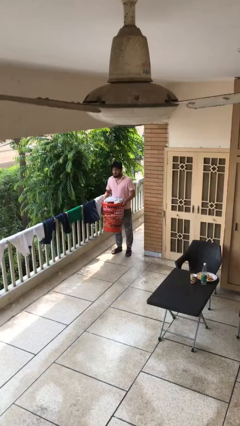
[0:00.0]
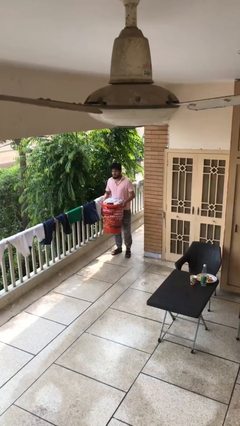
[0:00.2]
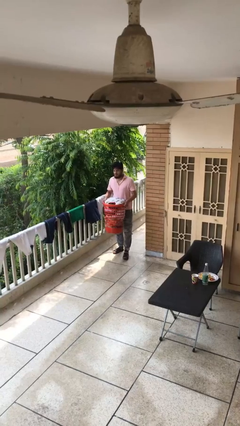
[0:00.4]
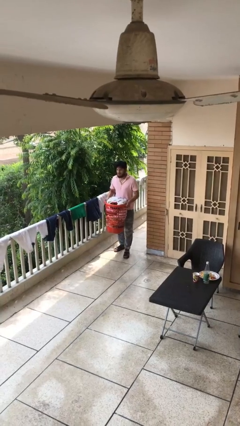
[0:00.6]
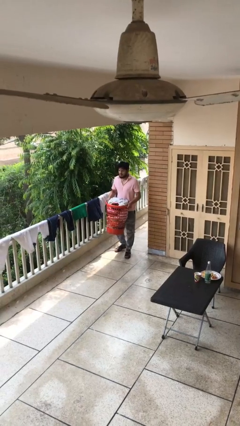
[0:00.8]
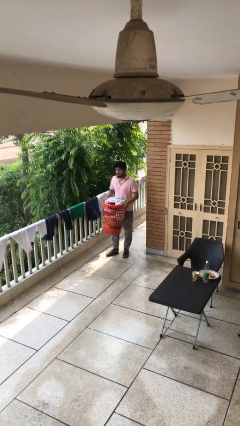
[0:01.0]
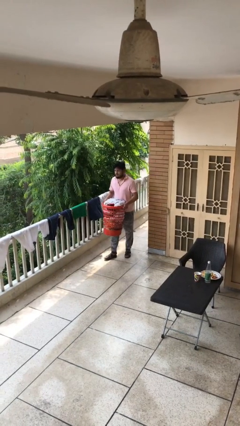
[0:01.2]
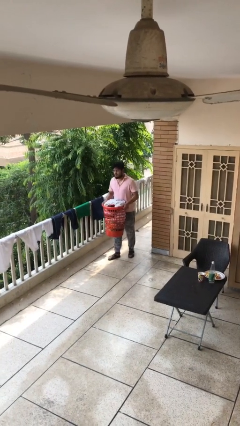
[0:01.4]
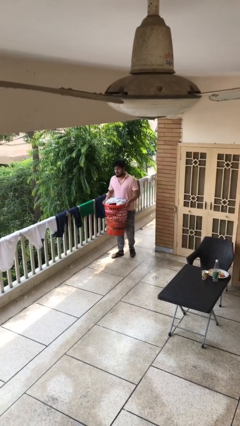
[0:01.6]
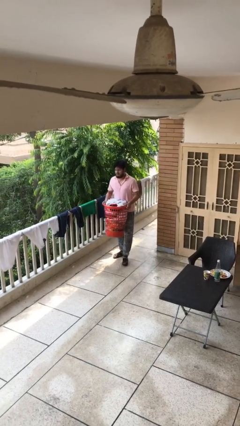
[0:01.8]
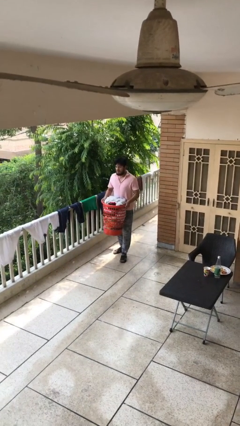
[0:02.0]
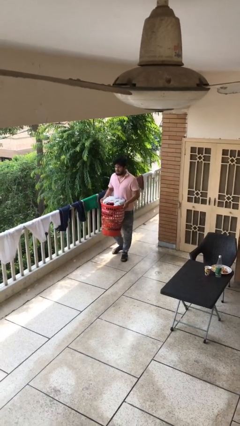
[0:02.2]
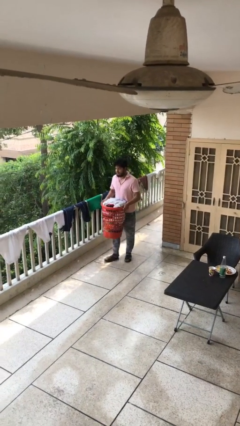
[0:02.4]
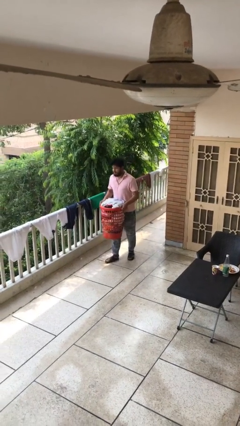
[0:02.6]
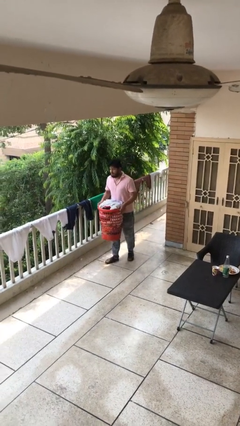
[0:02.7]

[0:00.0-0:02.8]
person carries heavy object

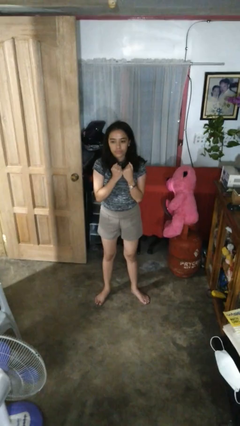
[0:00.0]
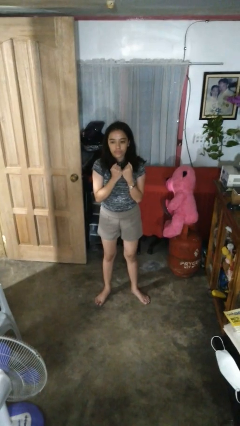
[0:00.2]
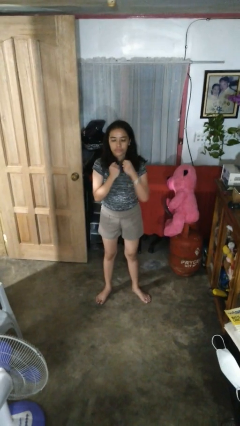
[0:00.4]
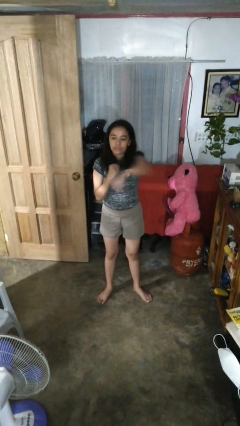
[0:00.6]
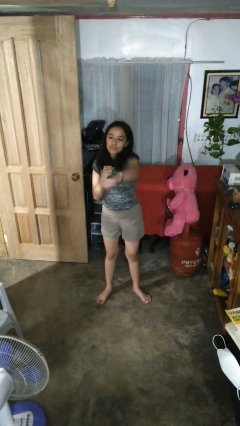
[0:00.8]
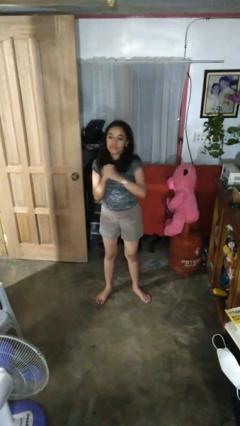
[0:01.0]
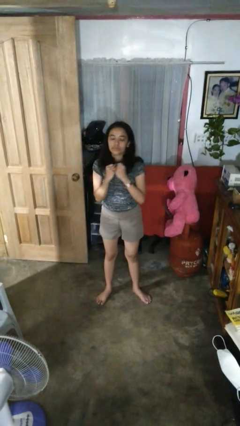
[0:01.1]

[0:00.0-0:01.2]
person punches

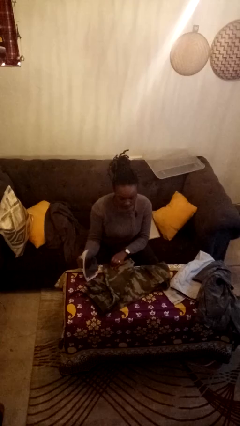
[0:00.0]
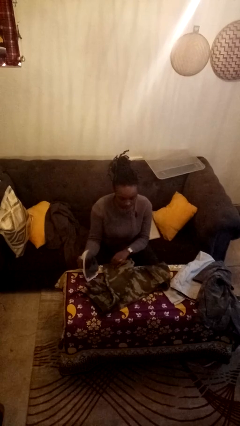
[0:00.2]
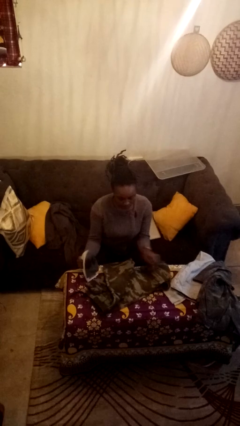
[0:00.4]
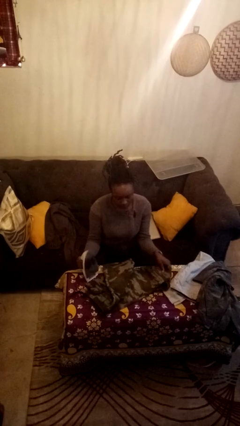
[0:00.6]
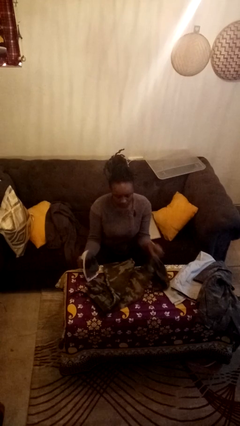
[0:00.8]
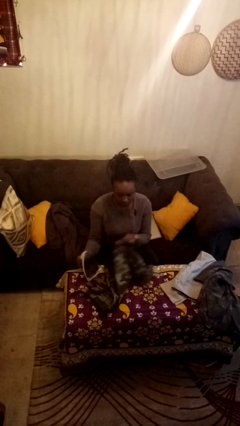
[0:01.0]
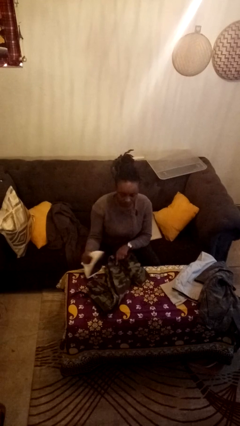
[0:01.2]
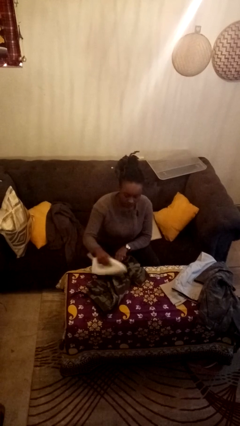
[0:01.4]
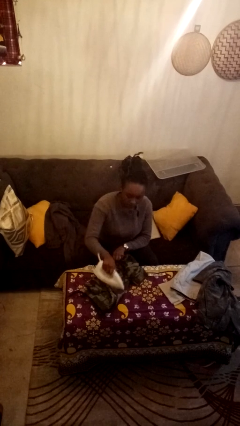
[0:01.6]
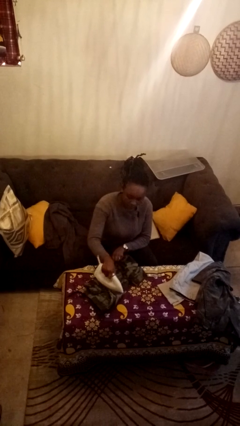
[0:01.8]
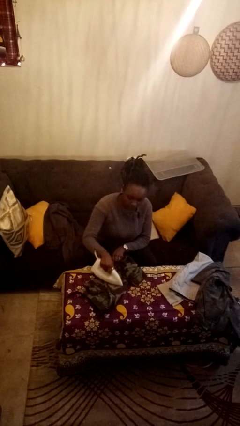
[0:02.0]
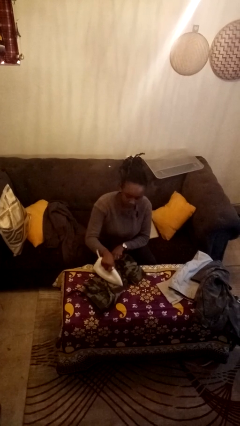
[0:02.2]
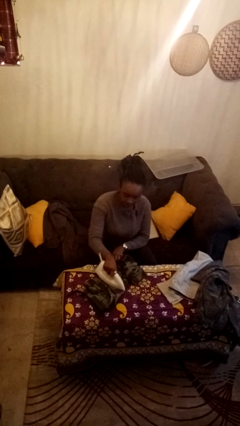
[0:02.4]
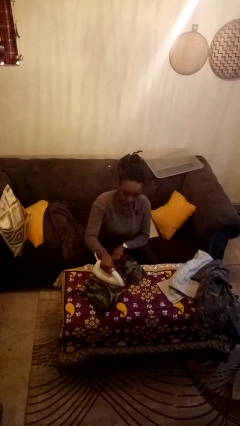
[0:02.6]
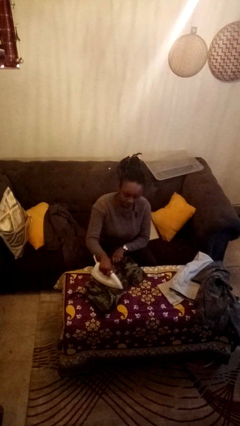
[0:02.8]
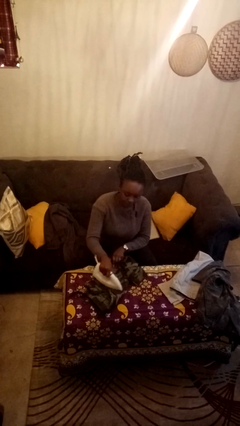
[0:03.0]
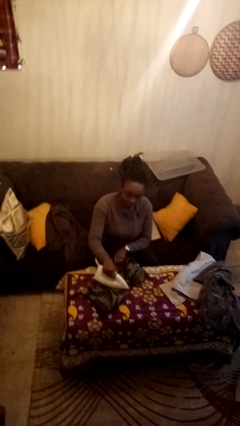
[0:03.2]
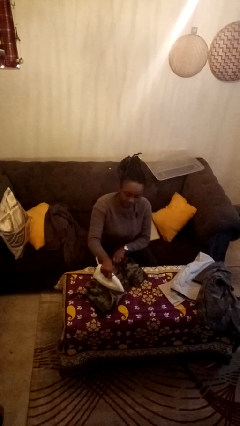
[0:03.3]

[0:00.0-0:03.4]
person irons clothes

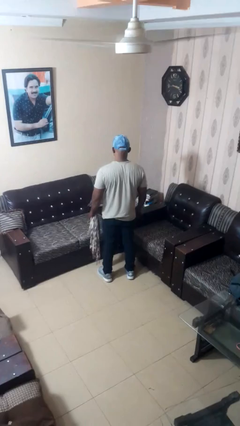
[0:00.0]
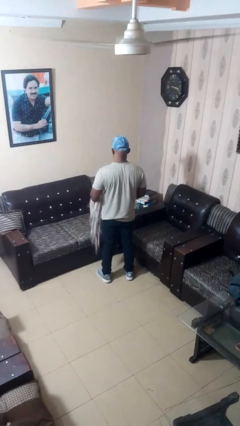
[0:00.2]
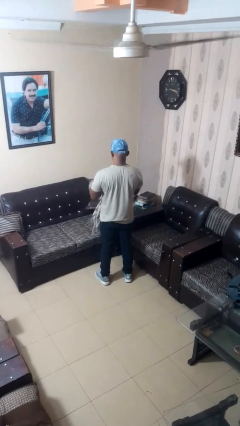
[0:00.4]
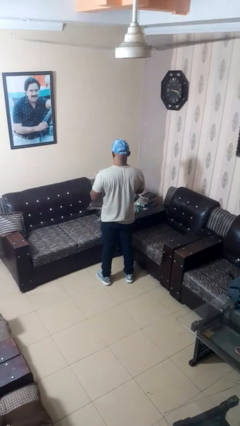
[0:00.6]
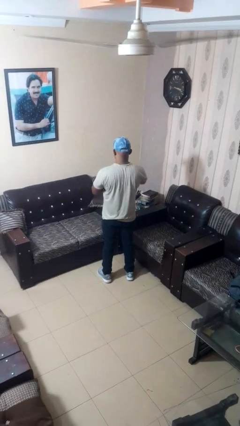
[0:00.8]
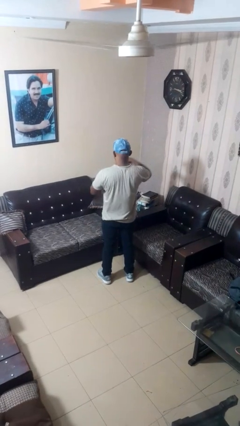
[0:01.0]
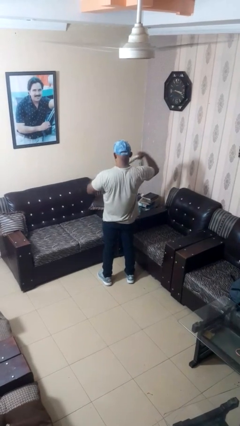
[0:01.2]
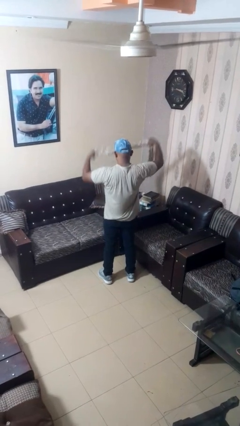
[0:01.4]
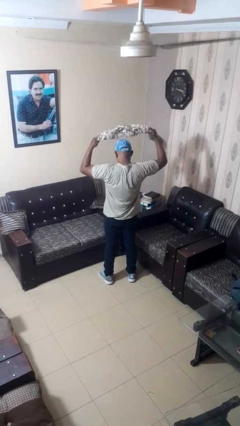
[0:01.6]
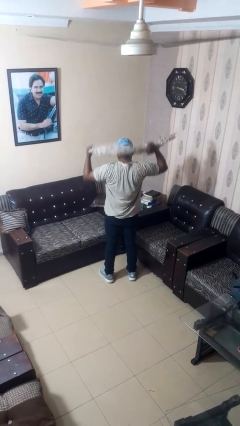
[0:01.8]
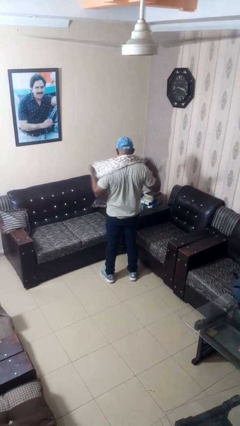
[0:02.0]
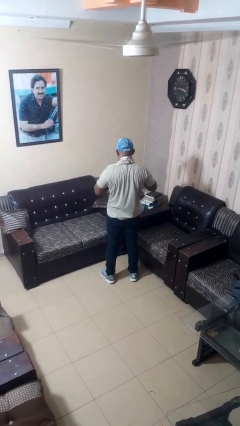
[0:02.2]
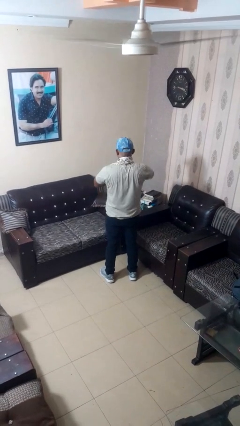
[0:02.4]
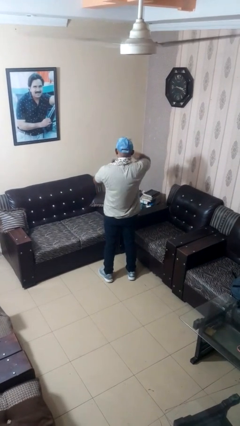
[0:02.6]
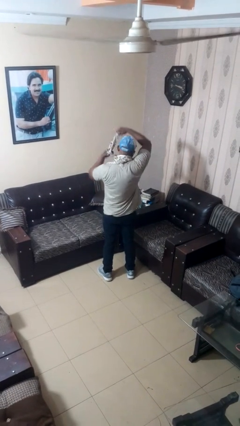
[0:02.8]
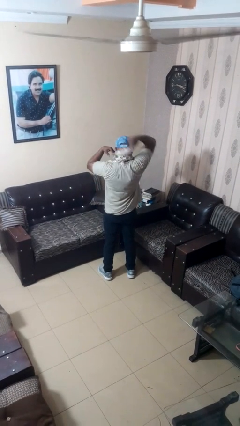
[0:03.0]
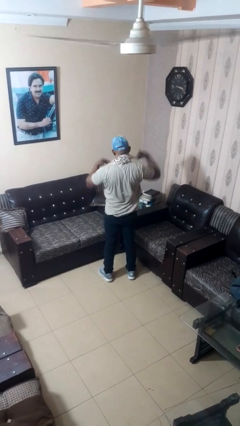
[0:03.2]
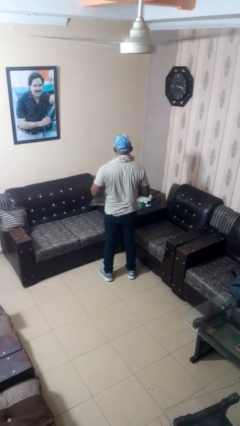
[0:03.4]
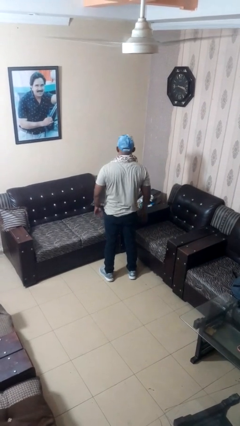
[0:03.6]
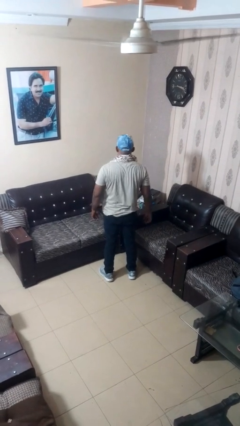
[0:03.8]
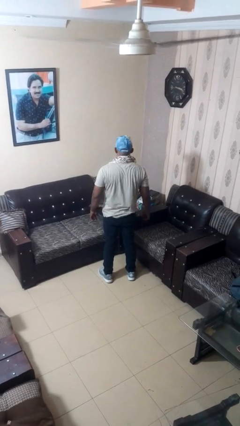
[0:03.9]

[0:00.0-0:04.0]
person puts on scarf

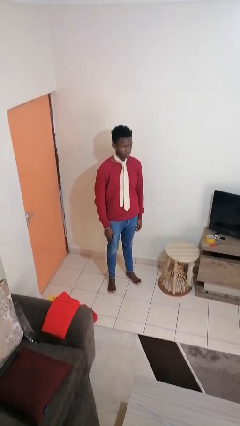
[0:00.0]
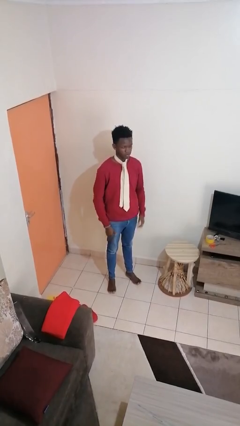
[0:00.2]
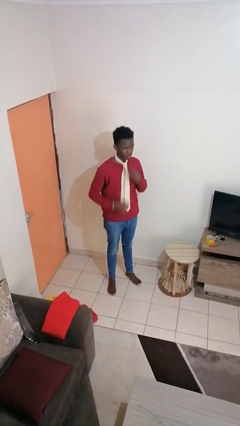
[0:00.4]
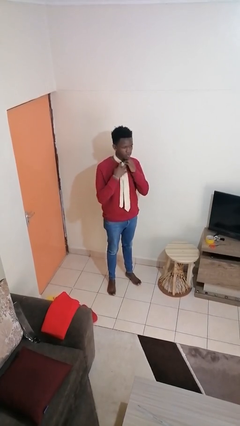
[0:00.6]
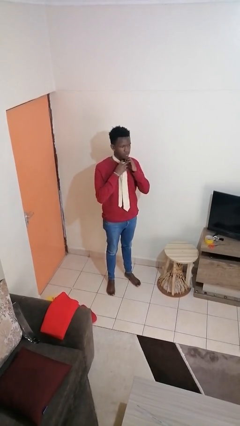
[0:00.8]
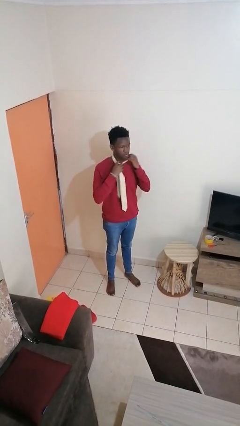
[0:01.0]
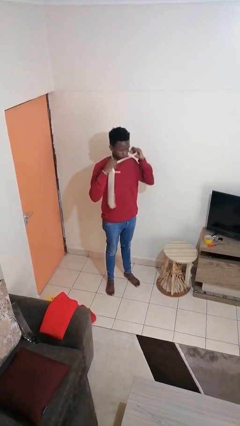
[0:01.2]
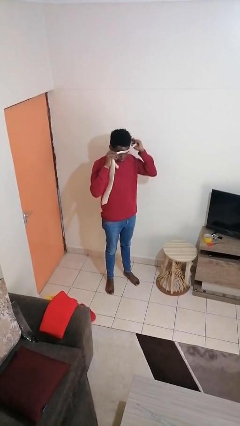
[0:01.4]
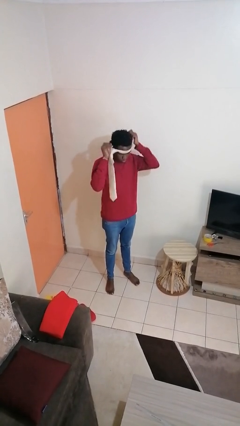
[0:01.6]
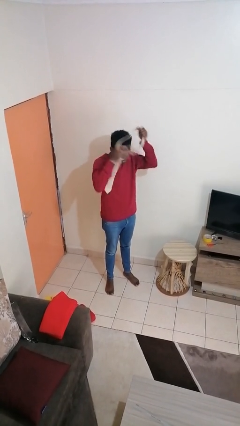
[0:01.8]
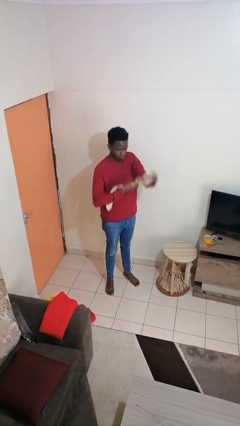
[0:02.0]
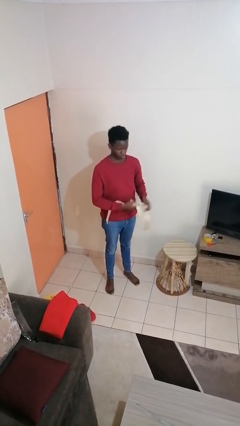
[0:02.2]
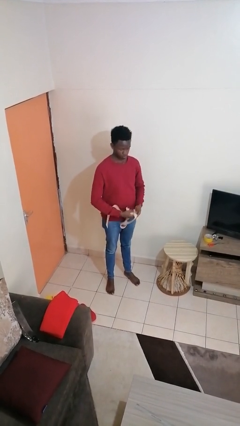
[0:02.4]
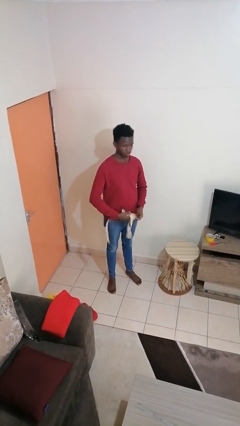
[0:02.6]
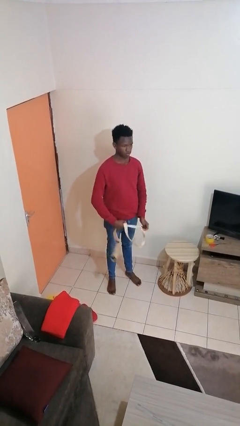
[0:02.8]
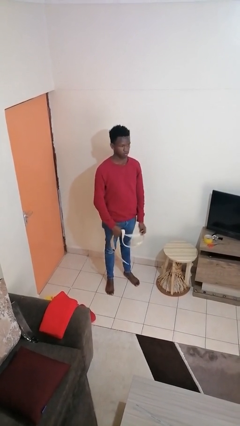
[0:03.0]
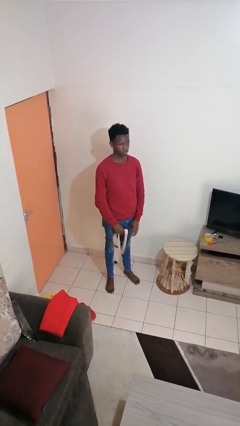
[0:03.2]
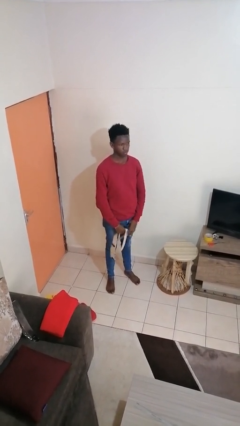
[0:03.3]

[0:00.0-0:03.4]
person takes off necktie

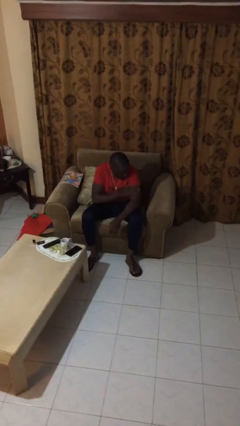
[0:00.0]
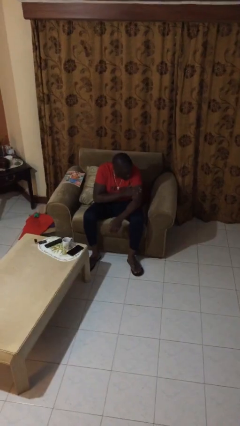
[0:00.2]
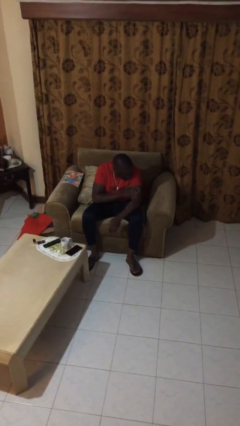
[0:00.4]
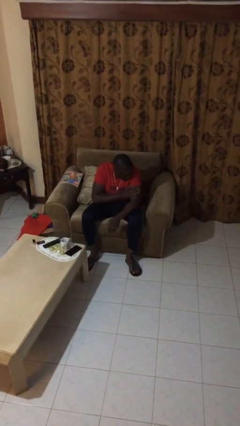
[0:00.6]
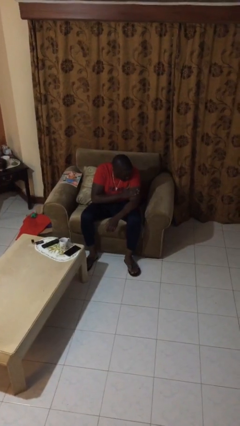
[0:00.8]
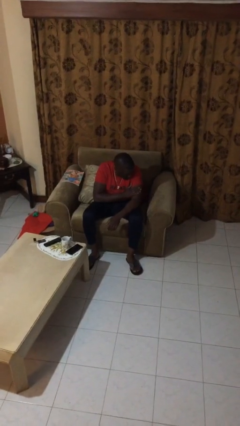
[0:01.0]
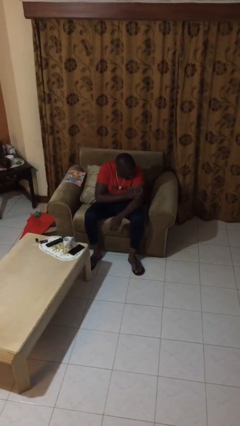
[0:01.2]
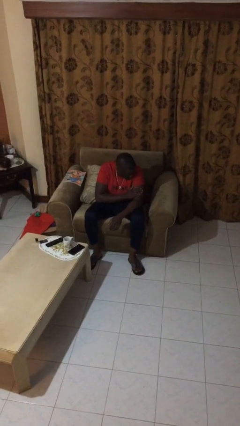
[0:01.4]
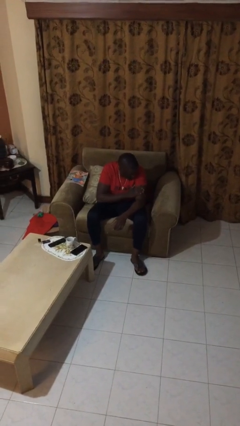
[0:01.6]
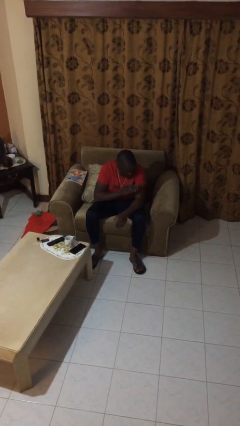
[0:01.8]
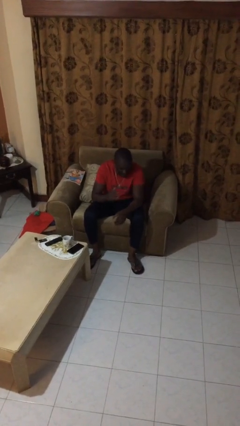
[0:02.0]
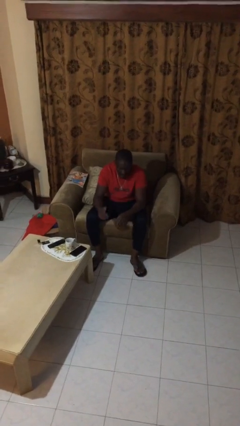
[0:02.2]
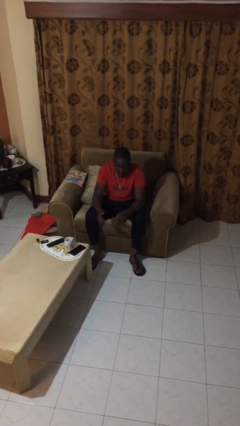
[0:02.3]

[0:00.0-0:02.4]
person swats bug
